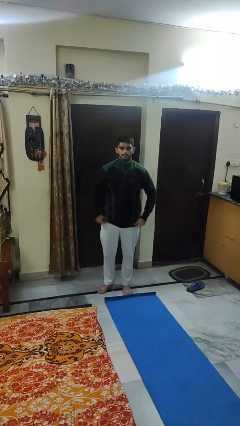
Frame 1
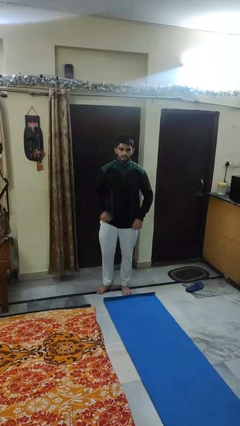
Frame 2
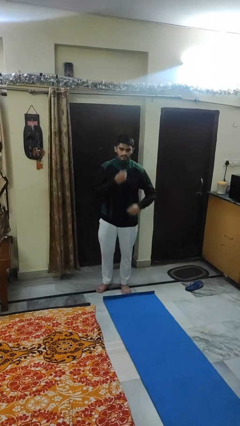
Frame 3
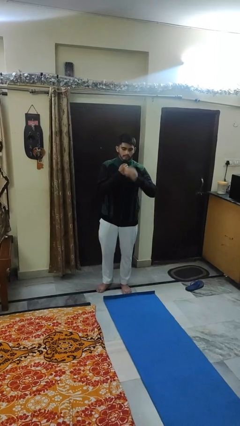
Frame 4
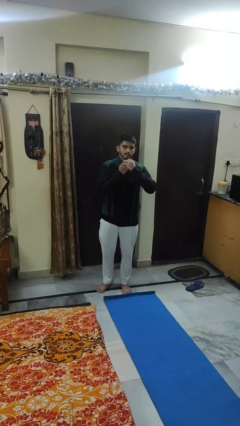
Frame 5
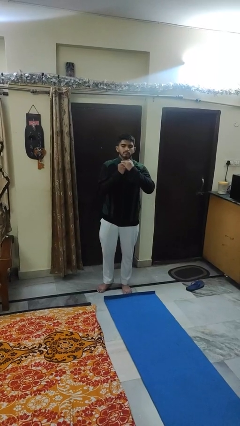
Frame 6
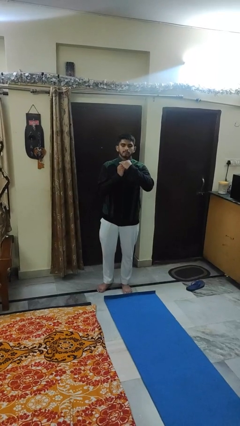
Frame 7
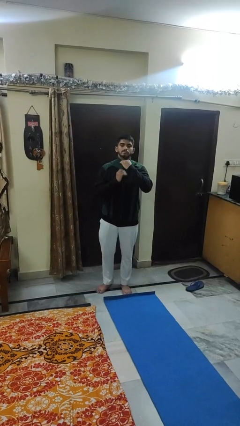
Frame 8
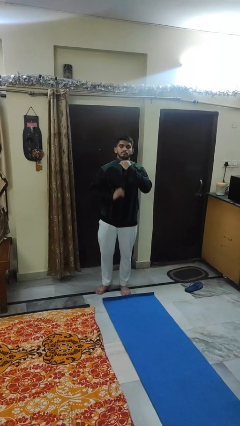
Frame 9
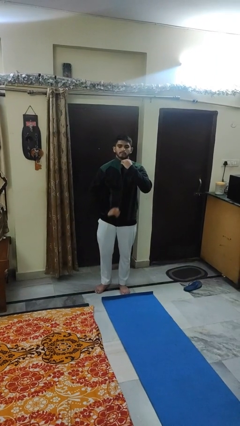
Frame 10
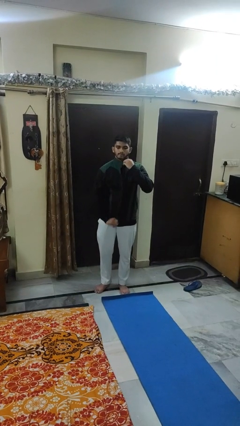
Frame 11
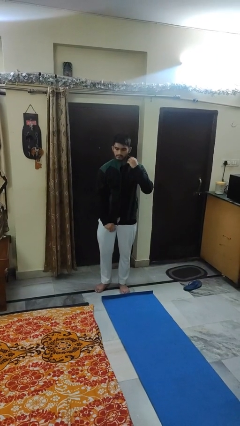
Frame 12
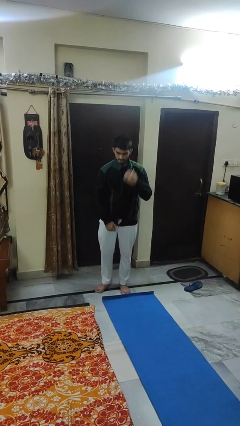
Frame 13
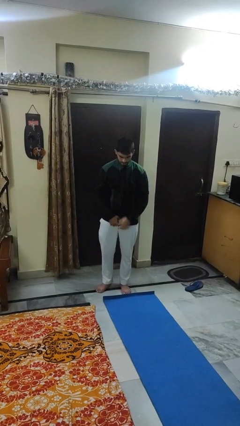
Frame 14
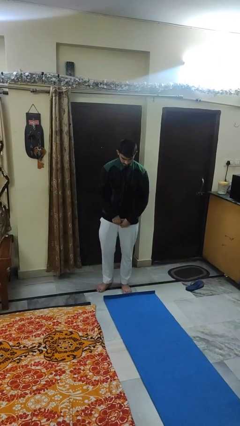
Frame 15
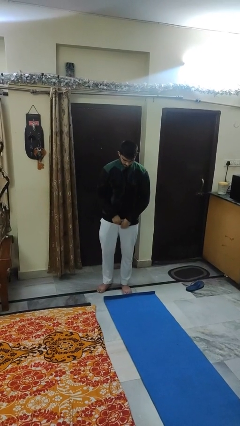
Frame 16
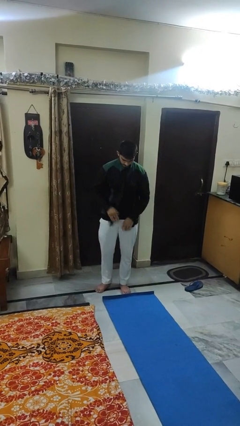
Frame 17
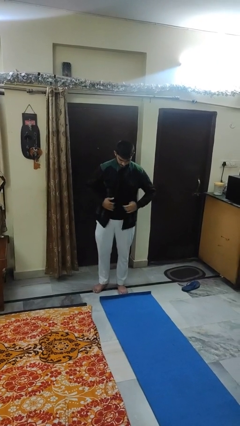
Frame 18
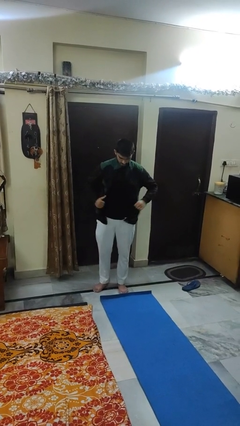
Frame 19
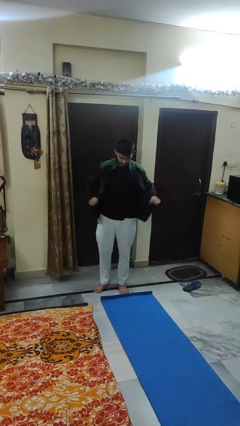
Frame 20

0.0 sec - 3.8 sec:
person unzips jacket

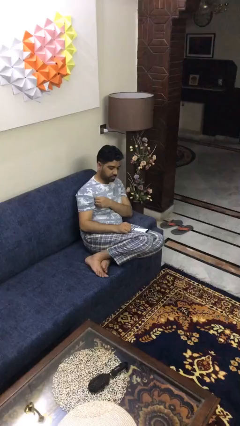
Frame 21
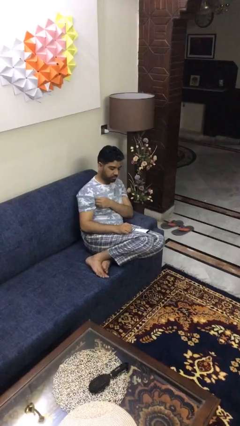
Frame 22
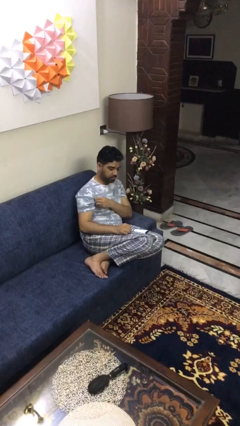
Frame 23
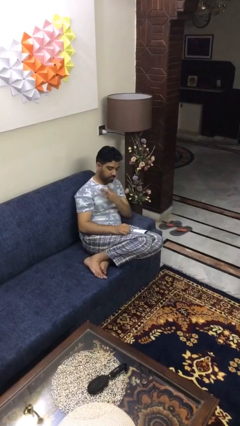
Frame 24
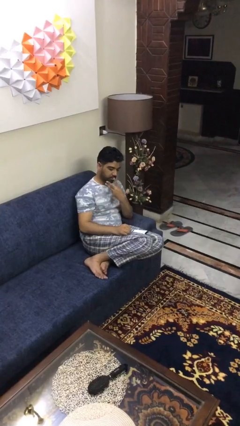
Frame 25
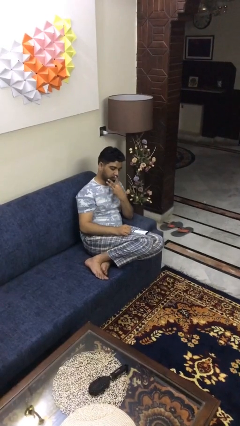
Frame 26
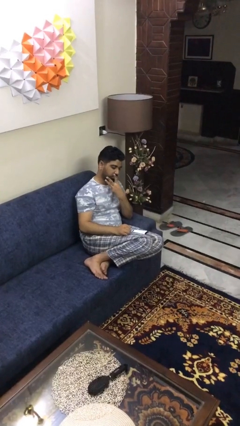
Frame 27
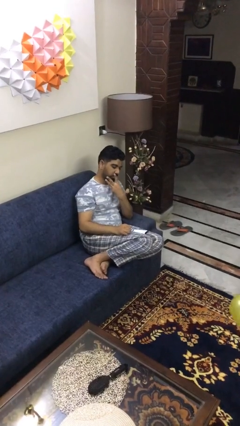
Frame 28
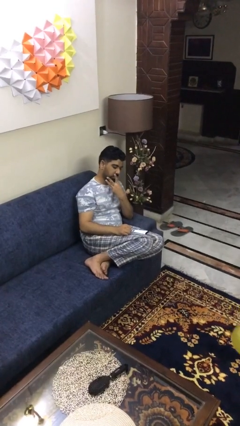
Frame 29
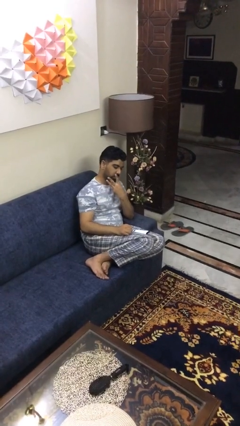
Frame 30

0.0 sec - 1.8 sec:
person gestures number three

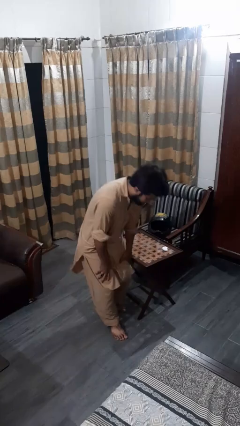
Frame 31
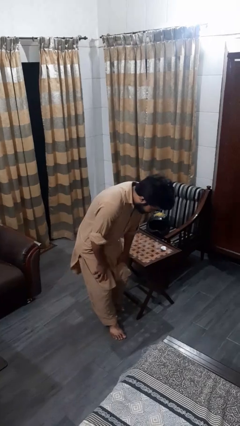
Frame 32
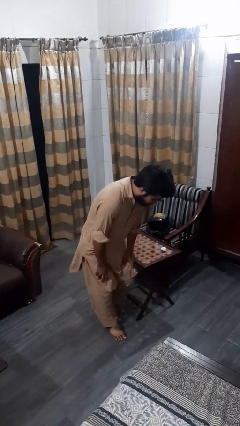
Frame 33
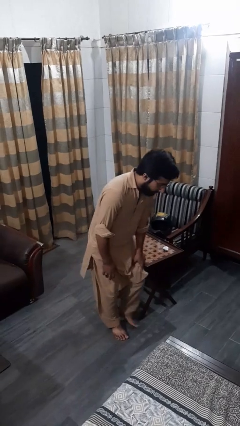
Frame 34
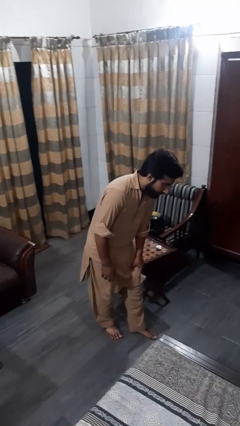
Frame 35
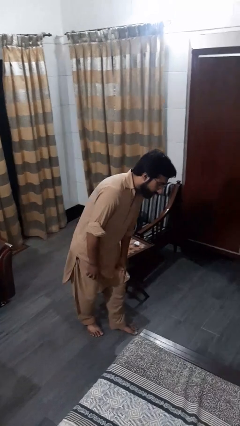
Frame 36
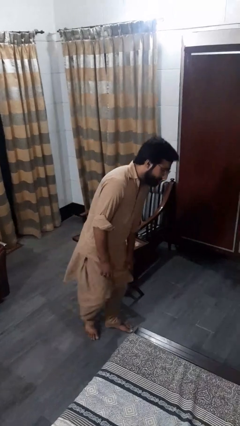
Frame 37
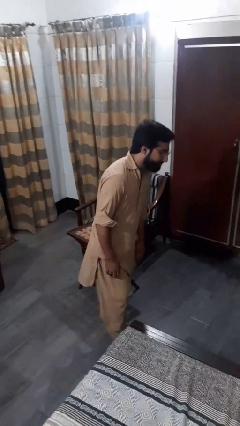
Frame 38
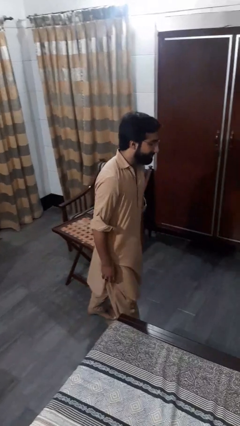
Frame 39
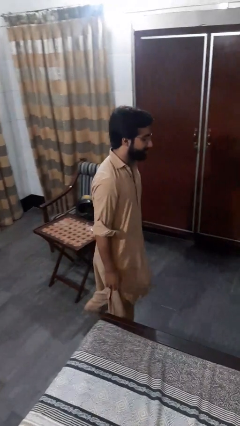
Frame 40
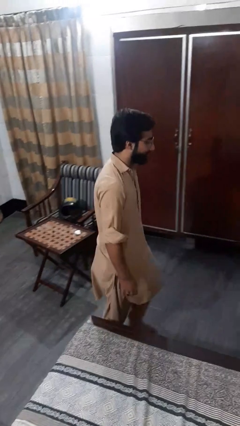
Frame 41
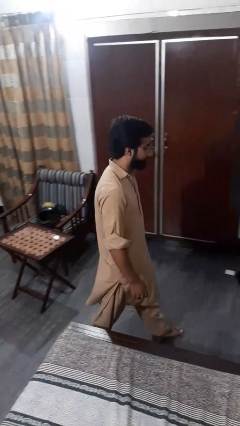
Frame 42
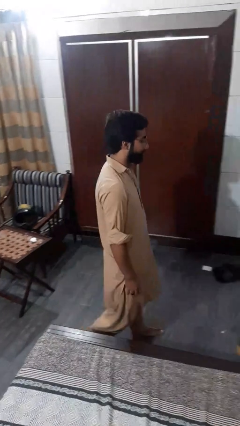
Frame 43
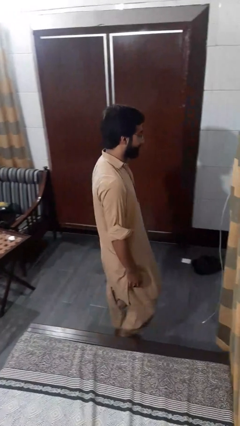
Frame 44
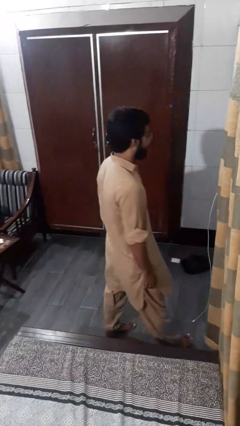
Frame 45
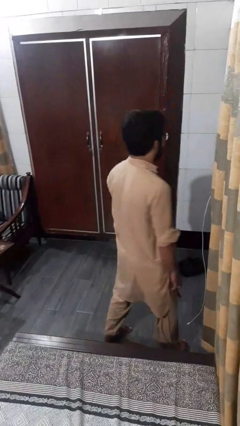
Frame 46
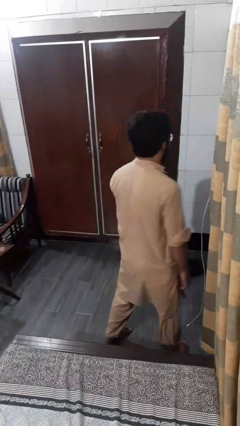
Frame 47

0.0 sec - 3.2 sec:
person bumps into table

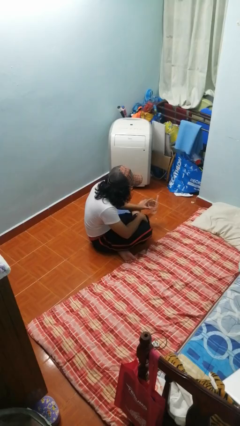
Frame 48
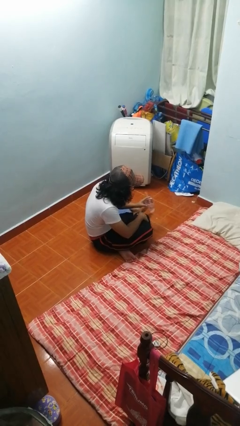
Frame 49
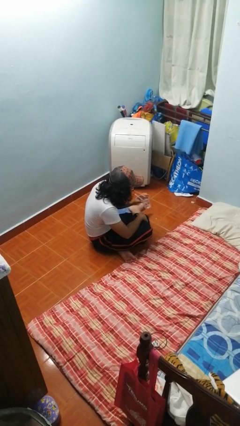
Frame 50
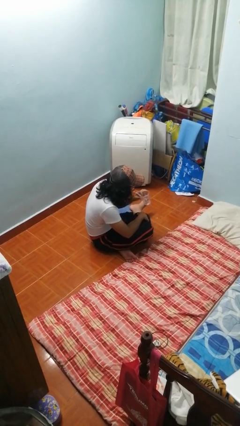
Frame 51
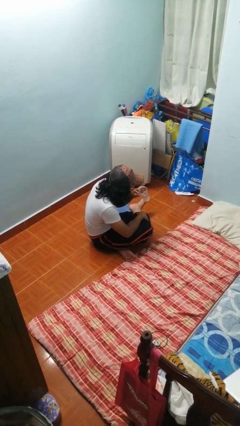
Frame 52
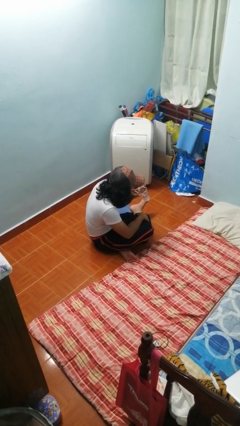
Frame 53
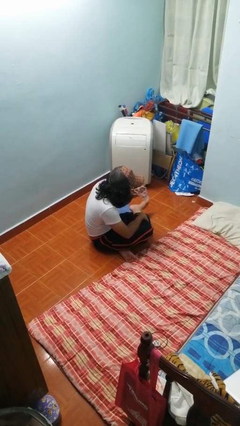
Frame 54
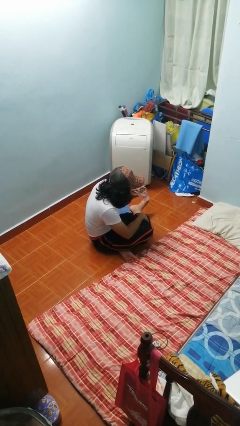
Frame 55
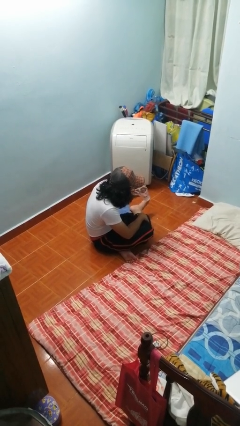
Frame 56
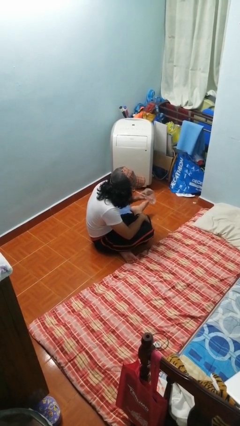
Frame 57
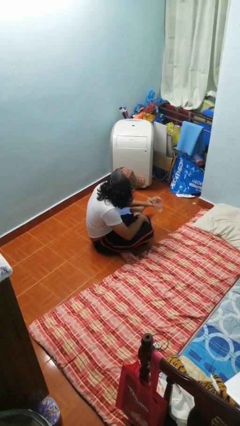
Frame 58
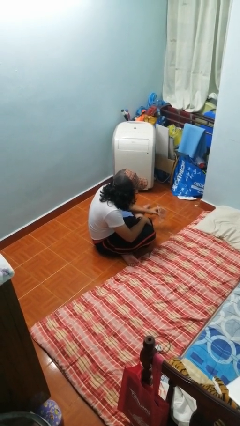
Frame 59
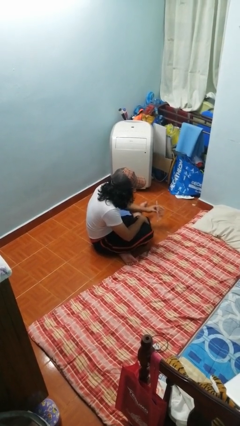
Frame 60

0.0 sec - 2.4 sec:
person drinks from straw

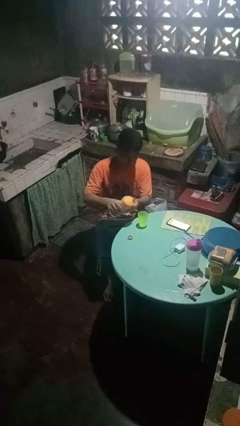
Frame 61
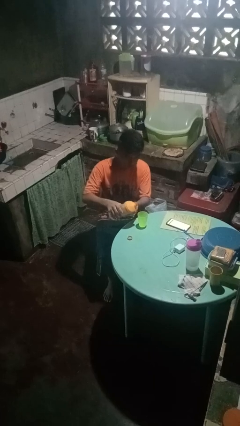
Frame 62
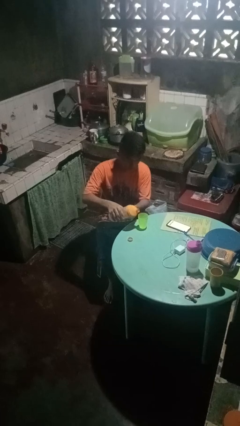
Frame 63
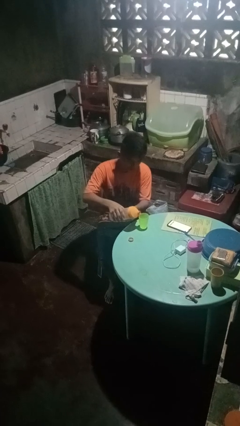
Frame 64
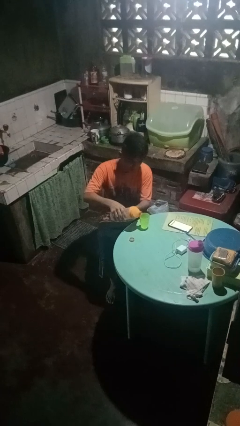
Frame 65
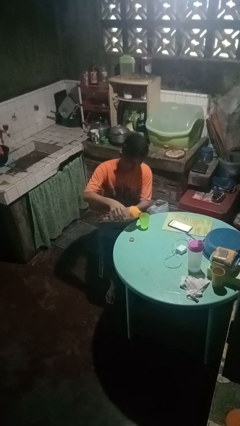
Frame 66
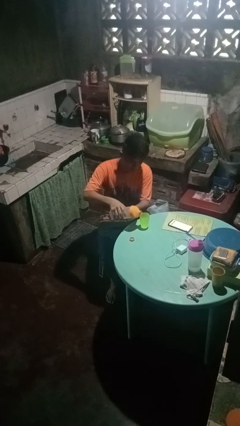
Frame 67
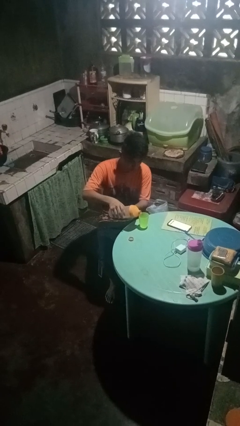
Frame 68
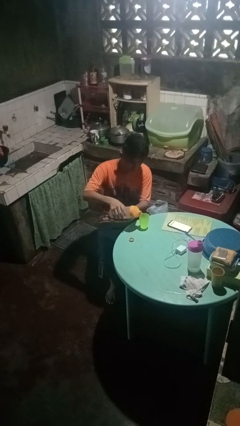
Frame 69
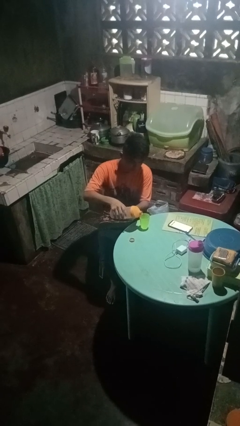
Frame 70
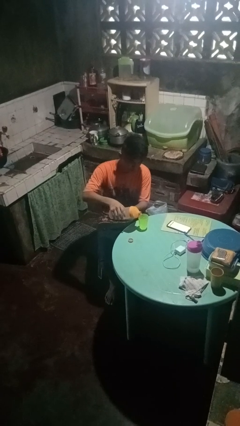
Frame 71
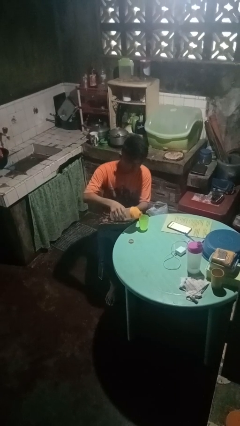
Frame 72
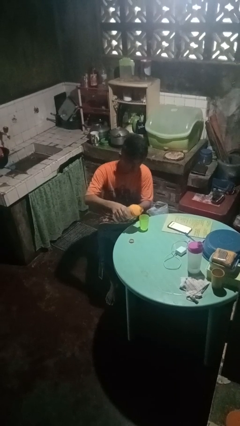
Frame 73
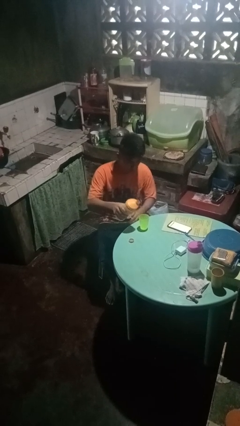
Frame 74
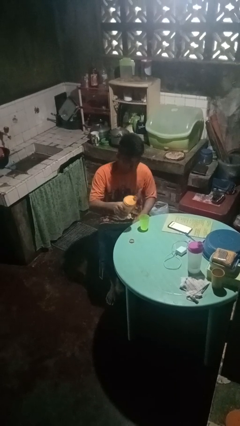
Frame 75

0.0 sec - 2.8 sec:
person pours liquid into cup

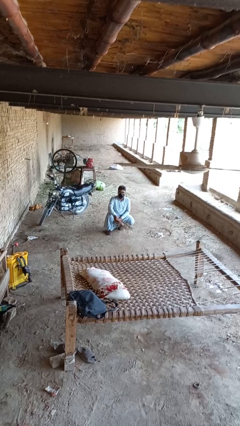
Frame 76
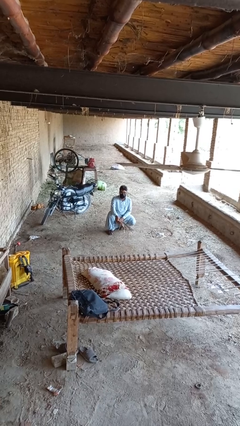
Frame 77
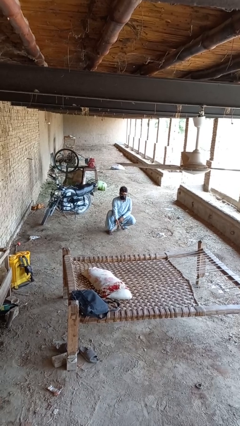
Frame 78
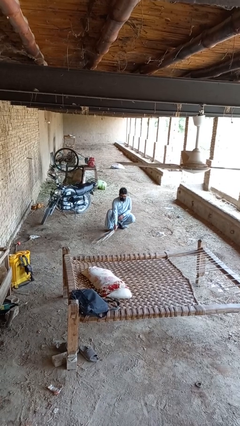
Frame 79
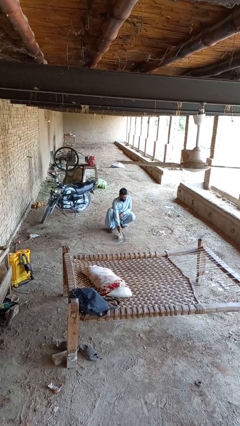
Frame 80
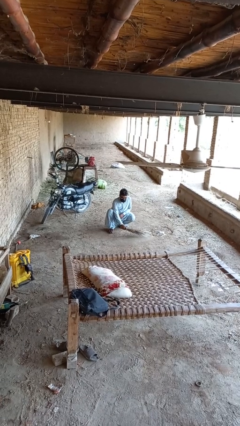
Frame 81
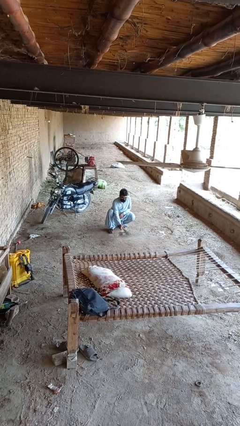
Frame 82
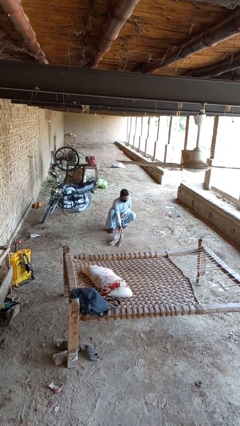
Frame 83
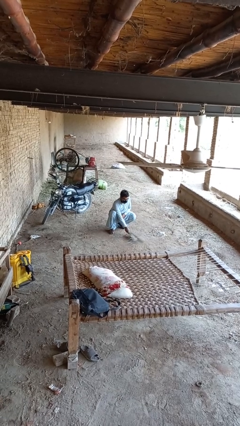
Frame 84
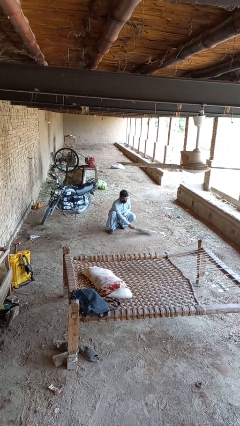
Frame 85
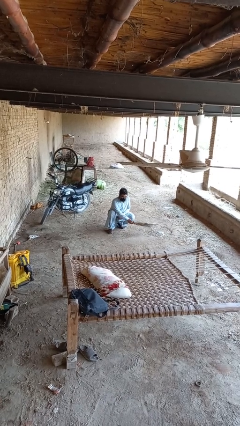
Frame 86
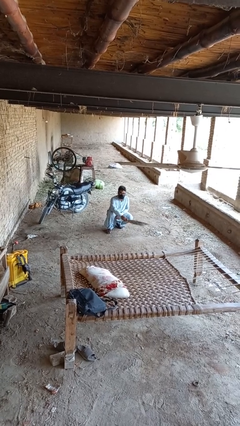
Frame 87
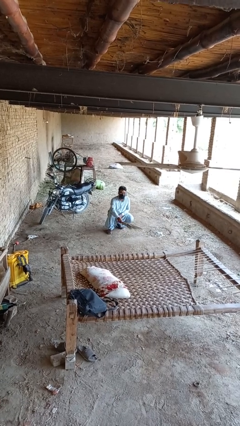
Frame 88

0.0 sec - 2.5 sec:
person sweeps floor

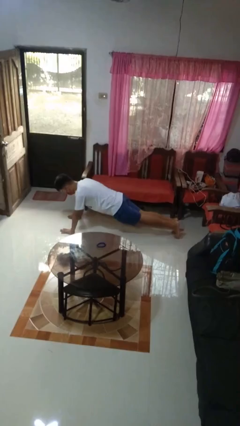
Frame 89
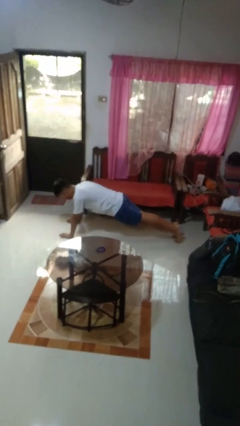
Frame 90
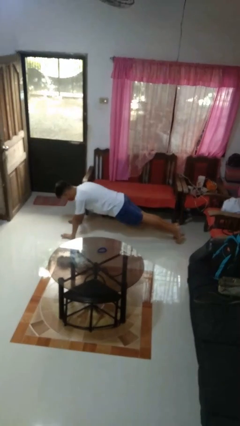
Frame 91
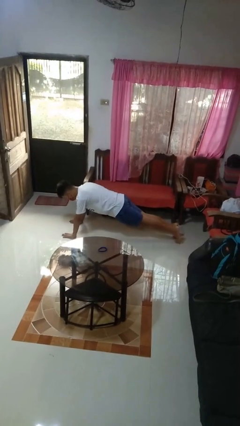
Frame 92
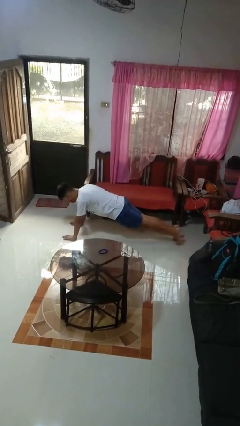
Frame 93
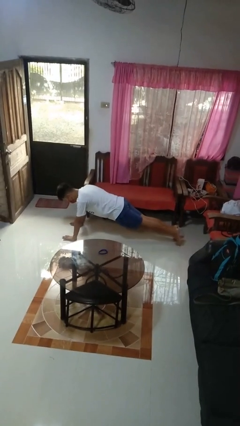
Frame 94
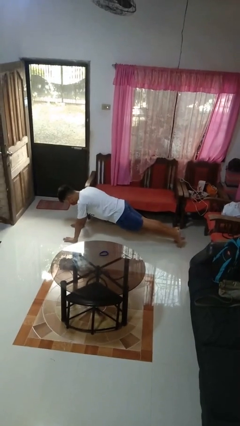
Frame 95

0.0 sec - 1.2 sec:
person exercises with pushup
